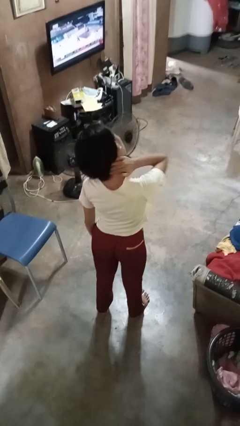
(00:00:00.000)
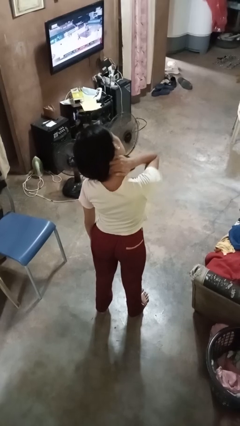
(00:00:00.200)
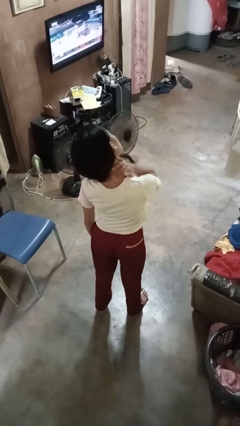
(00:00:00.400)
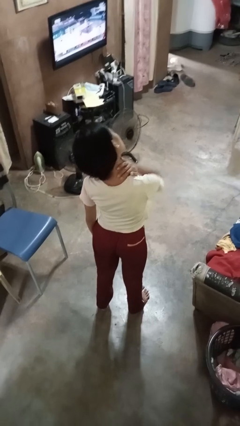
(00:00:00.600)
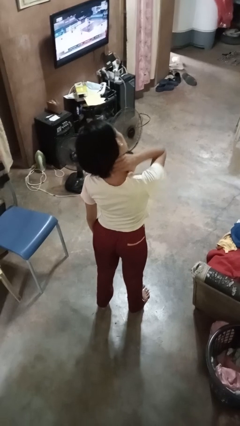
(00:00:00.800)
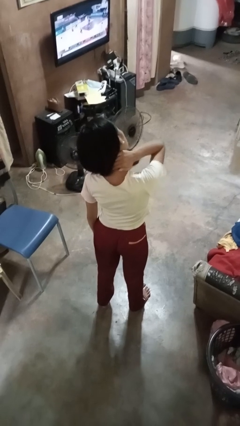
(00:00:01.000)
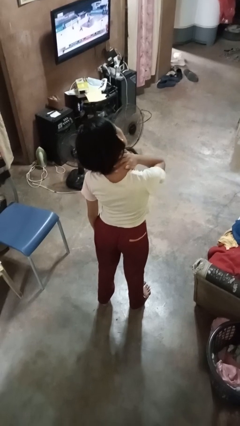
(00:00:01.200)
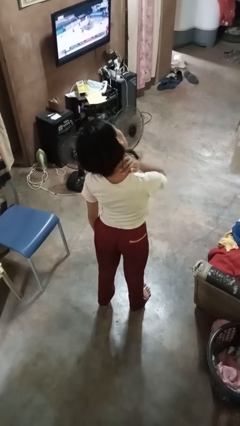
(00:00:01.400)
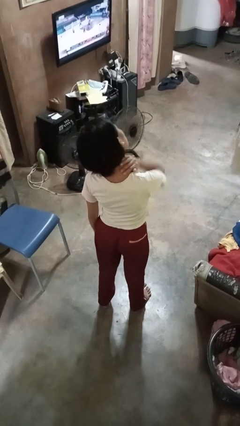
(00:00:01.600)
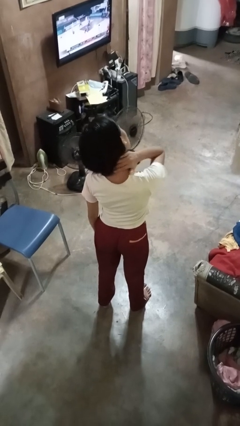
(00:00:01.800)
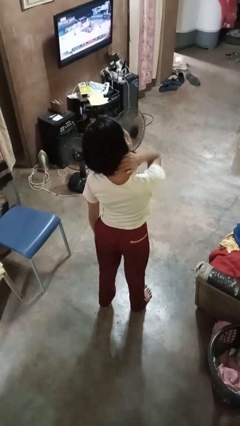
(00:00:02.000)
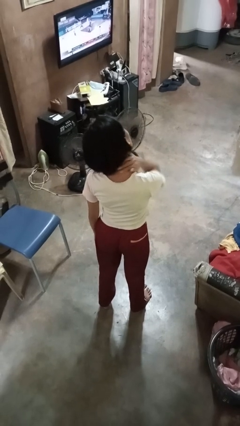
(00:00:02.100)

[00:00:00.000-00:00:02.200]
person rubs neck

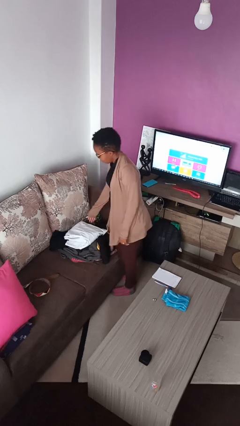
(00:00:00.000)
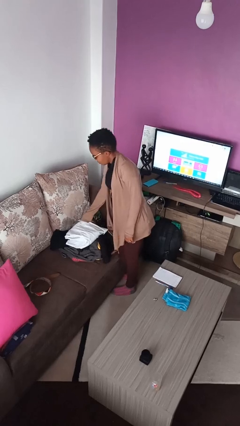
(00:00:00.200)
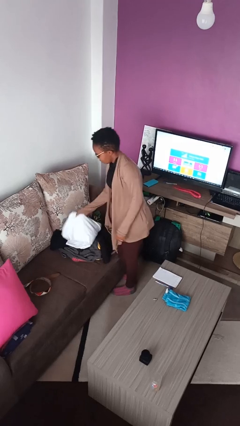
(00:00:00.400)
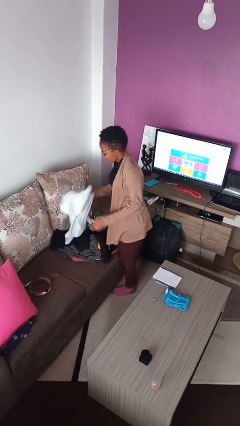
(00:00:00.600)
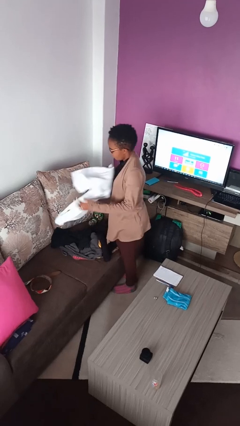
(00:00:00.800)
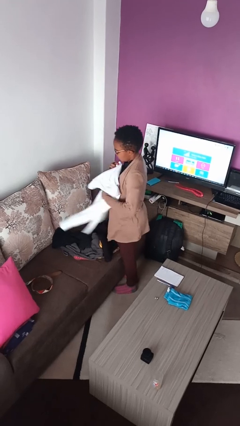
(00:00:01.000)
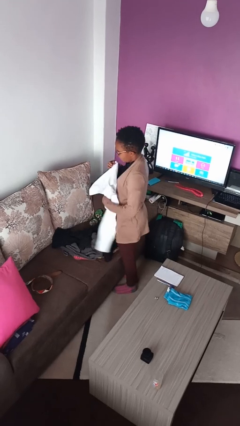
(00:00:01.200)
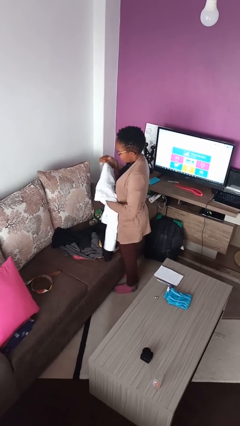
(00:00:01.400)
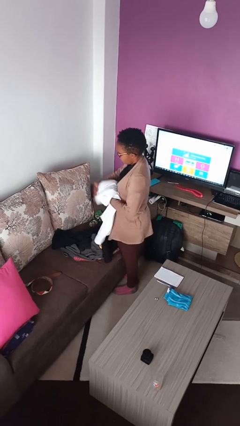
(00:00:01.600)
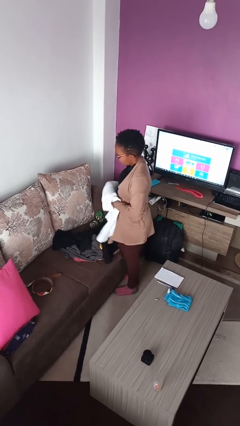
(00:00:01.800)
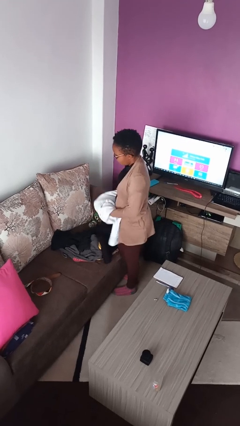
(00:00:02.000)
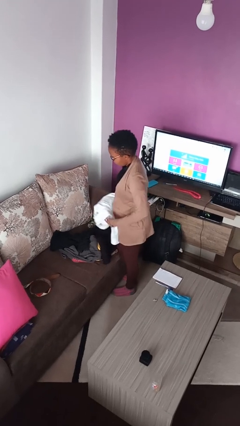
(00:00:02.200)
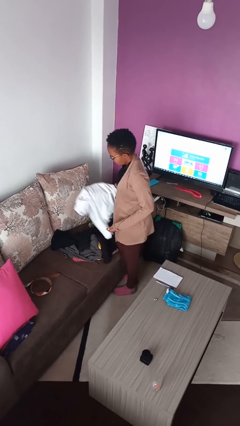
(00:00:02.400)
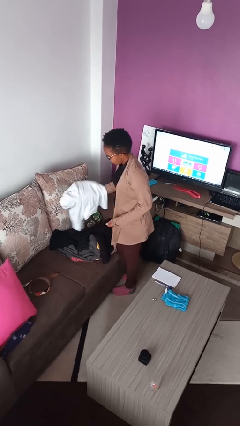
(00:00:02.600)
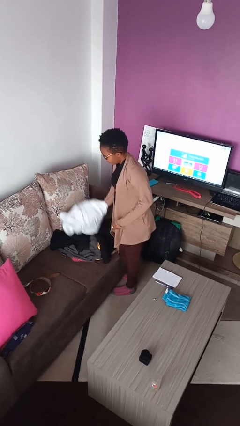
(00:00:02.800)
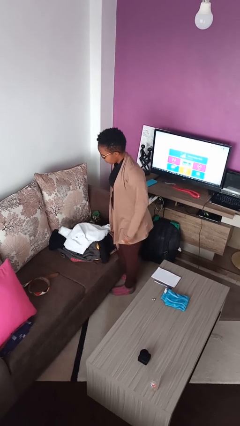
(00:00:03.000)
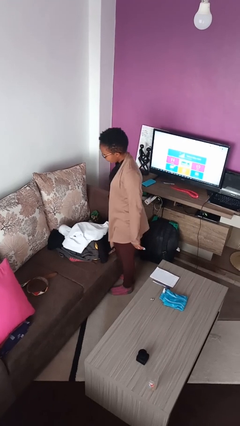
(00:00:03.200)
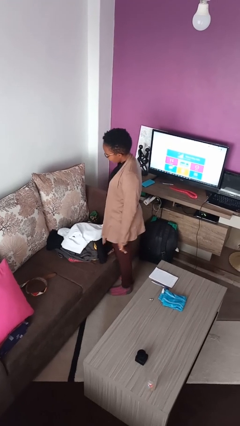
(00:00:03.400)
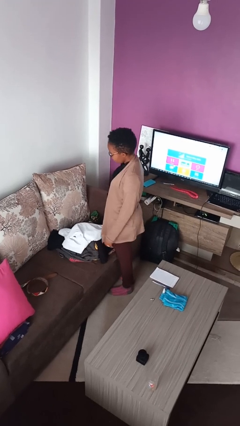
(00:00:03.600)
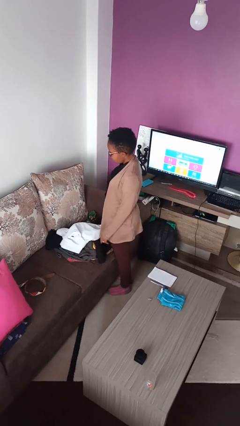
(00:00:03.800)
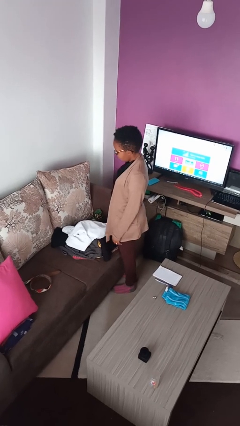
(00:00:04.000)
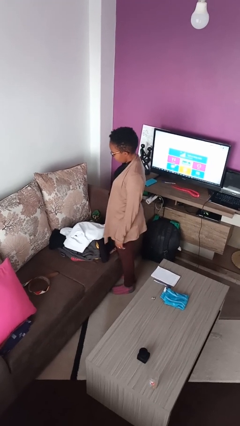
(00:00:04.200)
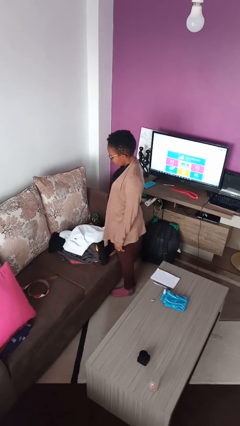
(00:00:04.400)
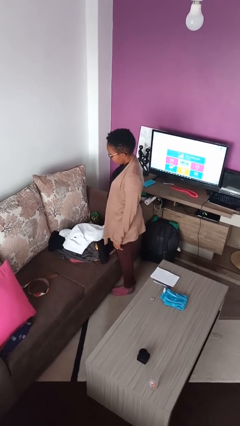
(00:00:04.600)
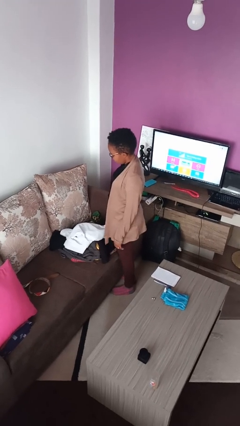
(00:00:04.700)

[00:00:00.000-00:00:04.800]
person folds shirt

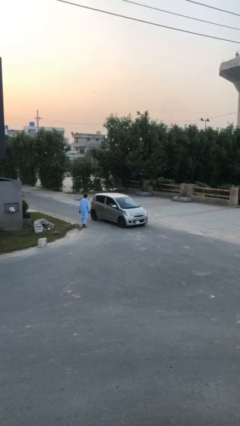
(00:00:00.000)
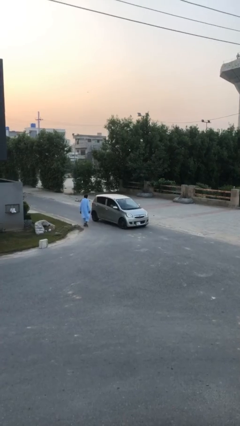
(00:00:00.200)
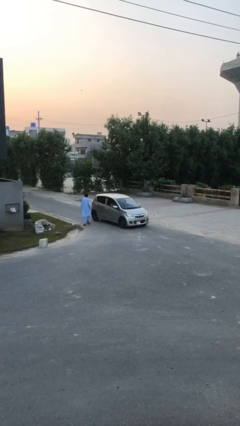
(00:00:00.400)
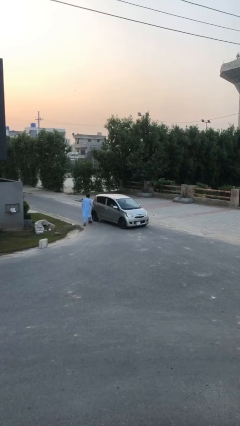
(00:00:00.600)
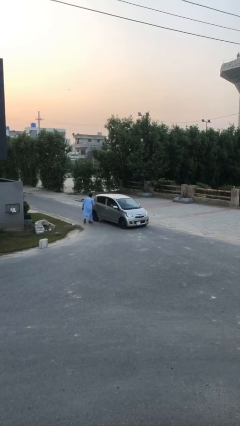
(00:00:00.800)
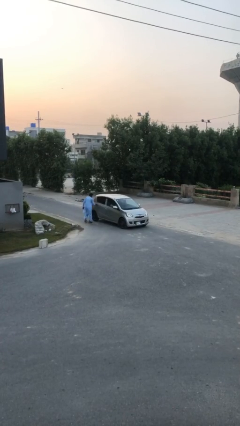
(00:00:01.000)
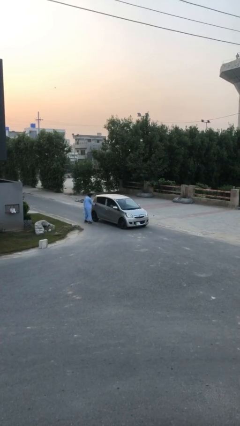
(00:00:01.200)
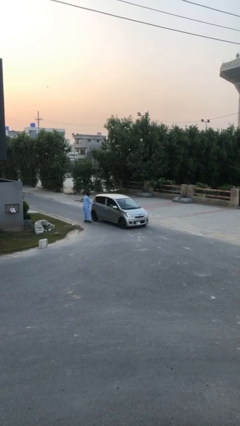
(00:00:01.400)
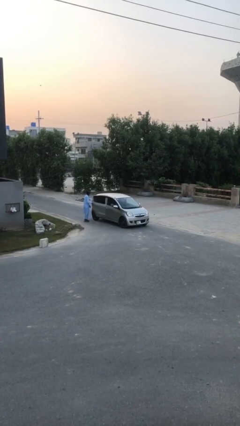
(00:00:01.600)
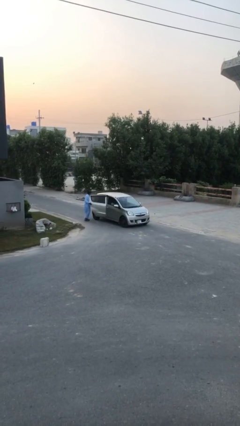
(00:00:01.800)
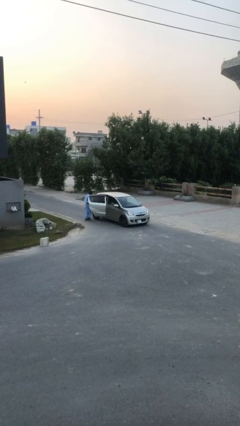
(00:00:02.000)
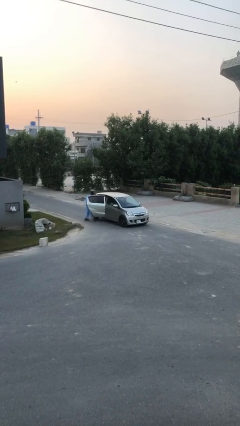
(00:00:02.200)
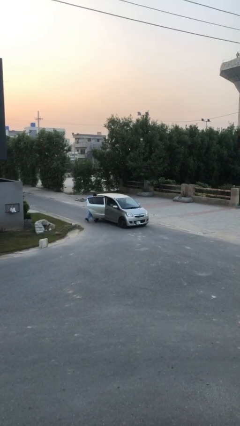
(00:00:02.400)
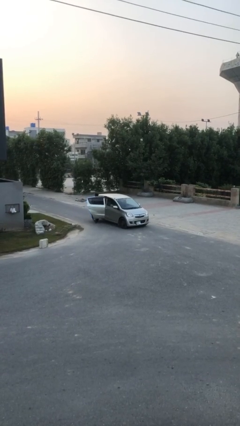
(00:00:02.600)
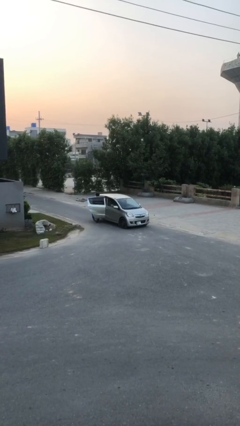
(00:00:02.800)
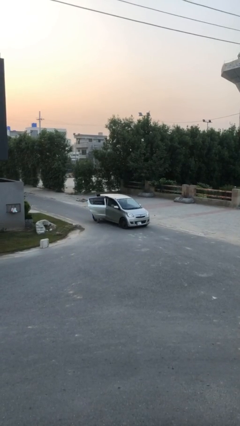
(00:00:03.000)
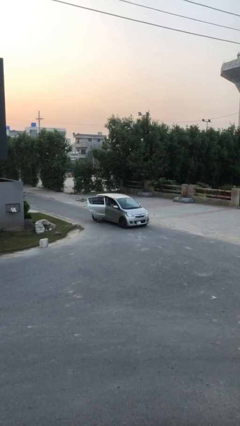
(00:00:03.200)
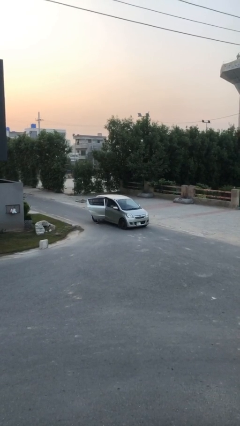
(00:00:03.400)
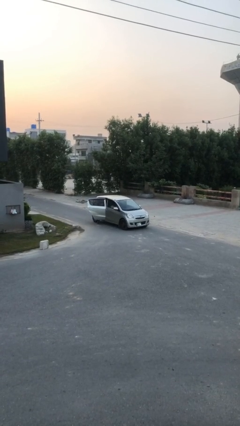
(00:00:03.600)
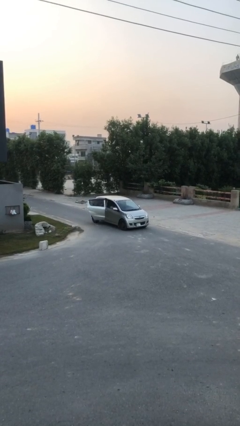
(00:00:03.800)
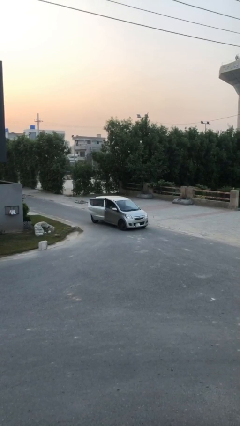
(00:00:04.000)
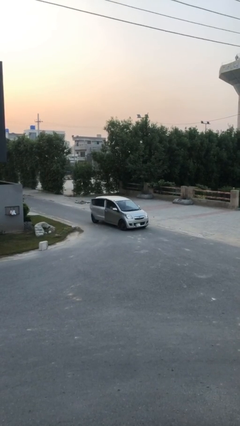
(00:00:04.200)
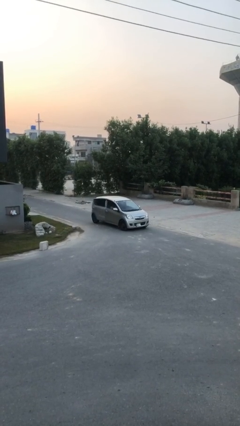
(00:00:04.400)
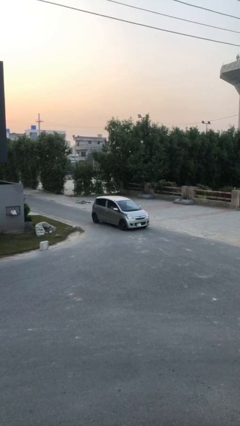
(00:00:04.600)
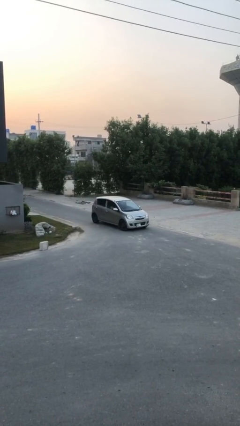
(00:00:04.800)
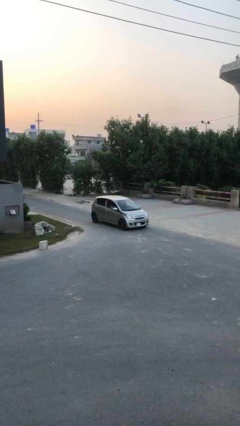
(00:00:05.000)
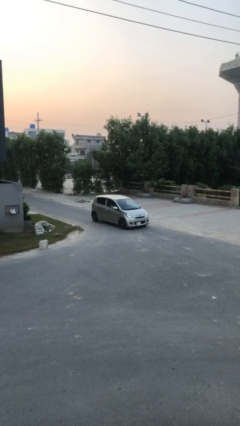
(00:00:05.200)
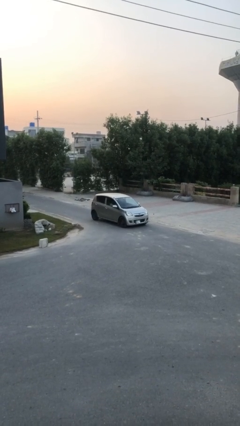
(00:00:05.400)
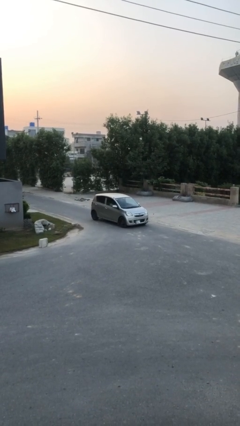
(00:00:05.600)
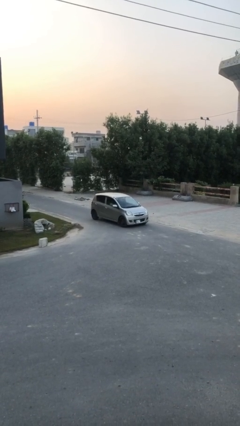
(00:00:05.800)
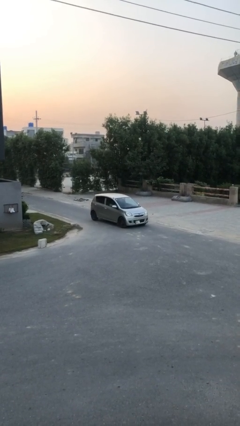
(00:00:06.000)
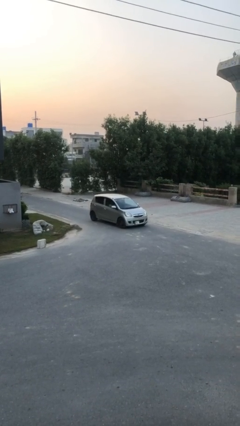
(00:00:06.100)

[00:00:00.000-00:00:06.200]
car picks up person

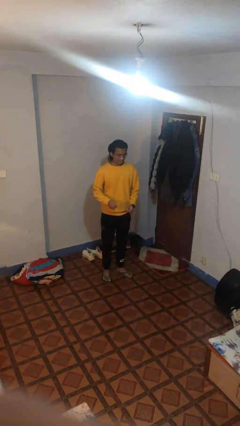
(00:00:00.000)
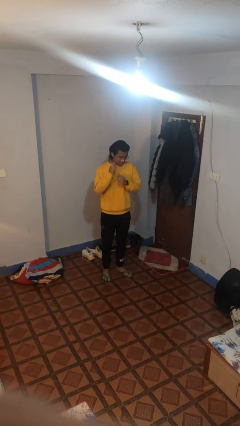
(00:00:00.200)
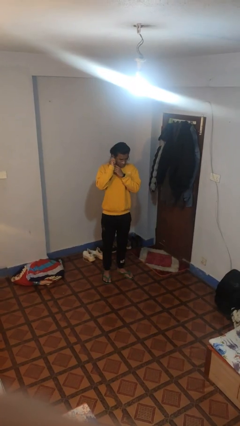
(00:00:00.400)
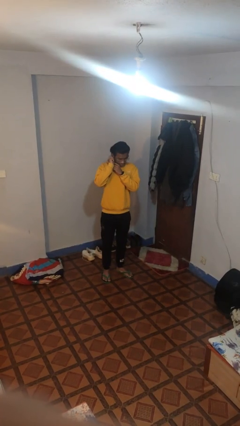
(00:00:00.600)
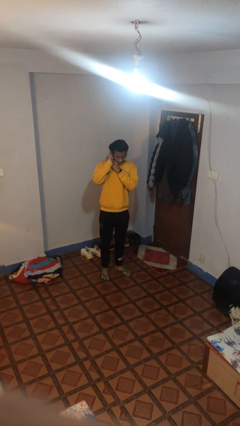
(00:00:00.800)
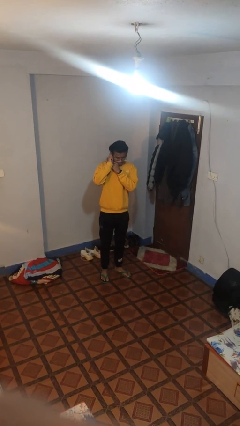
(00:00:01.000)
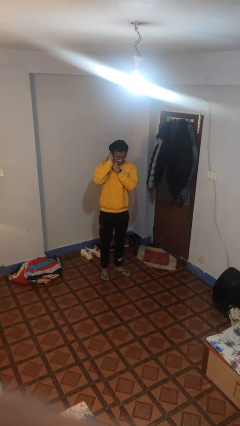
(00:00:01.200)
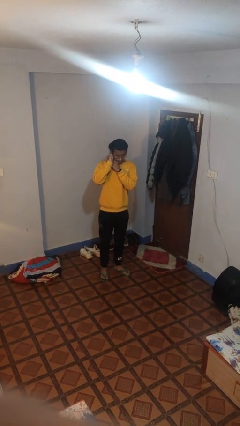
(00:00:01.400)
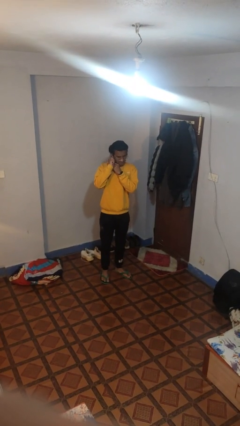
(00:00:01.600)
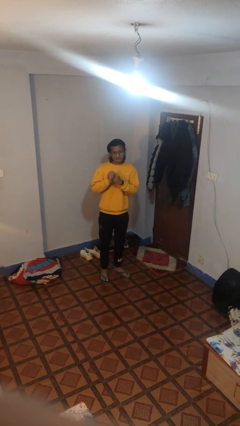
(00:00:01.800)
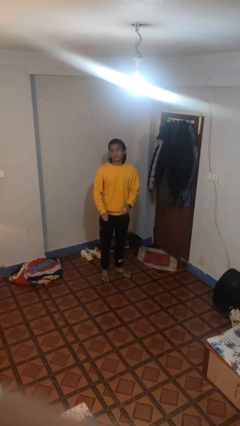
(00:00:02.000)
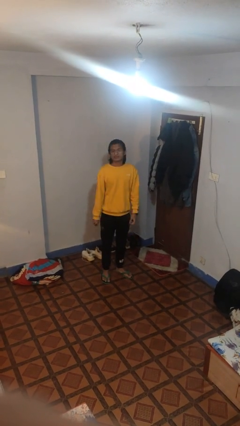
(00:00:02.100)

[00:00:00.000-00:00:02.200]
person takes off earrings

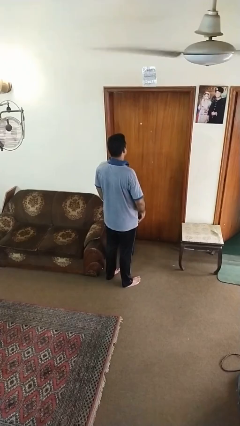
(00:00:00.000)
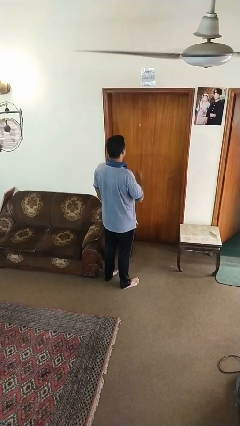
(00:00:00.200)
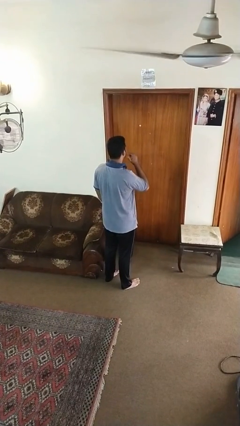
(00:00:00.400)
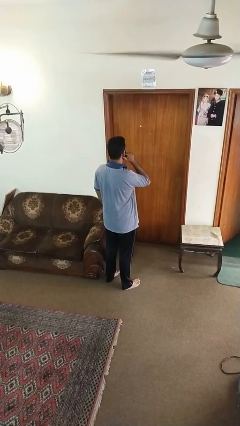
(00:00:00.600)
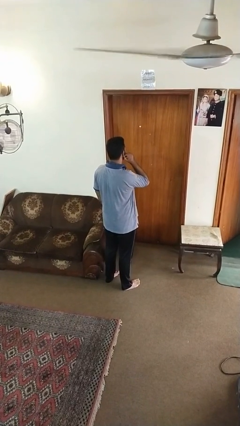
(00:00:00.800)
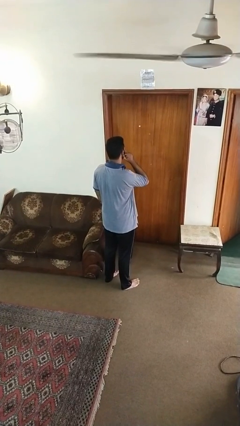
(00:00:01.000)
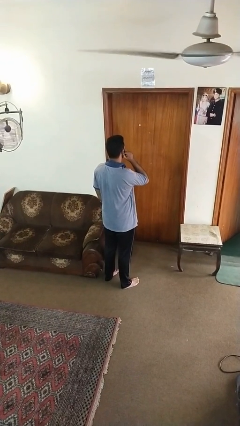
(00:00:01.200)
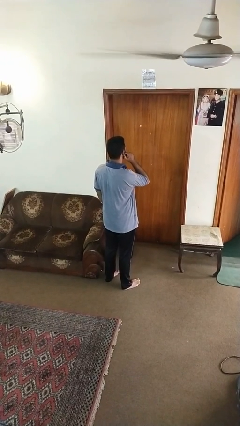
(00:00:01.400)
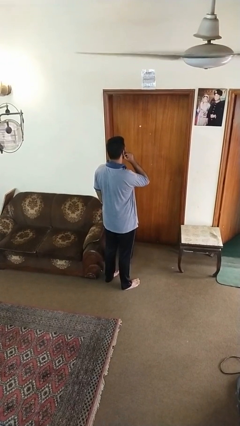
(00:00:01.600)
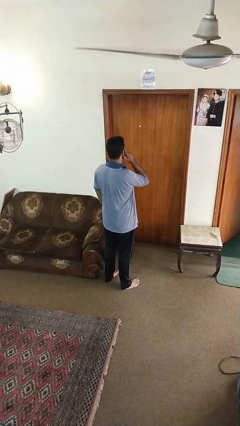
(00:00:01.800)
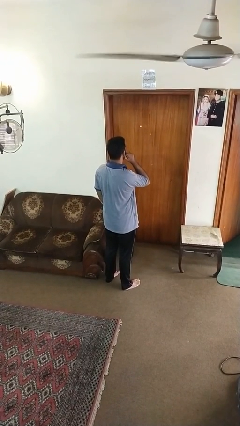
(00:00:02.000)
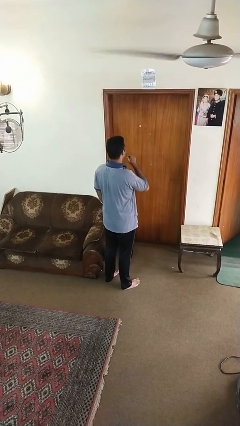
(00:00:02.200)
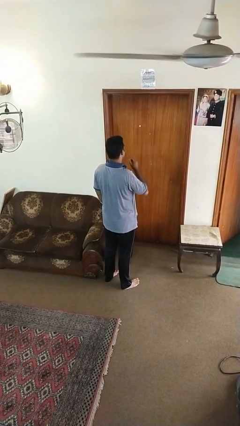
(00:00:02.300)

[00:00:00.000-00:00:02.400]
person touches earlobe
